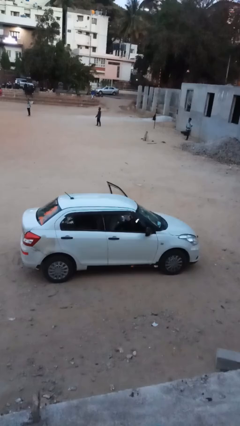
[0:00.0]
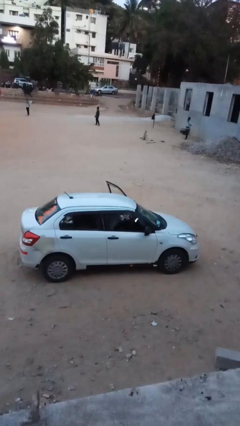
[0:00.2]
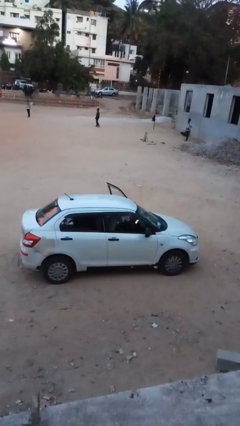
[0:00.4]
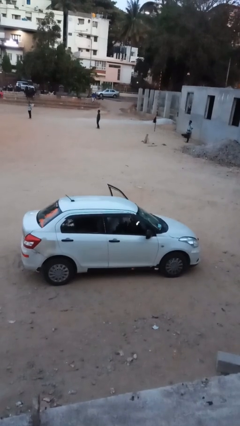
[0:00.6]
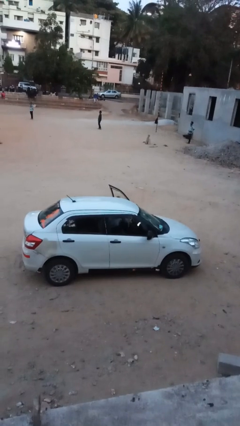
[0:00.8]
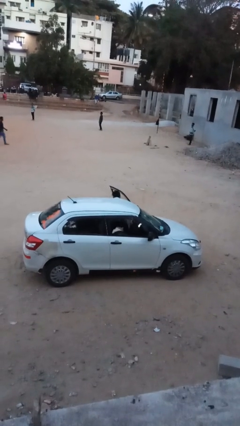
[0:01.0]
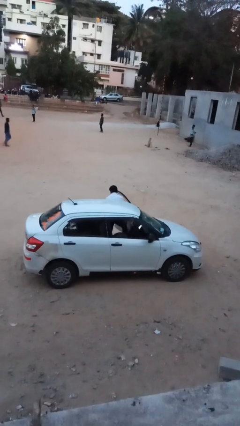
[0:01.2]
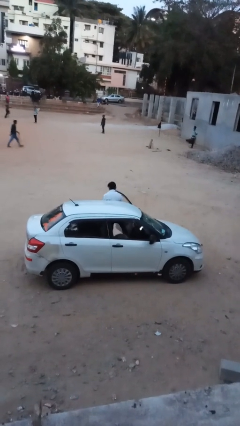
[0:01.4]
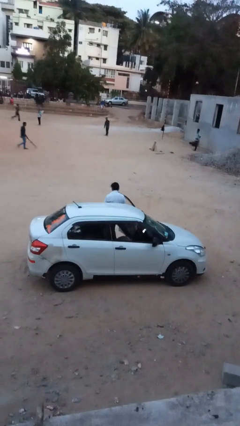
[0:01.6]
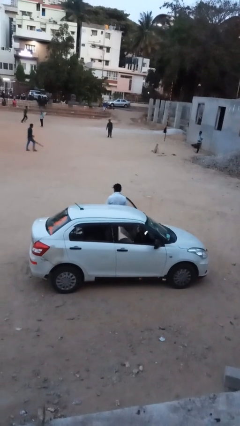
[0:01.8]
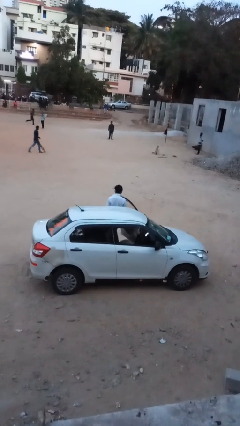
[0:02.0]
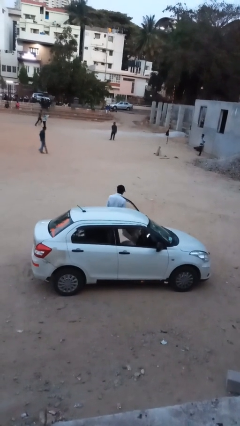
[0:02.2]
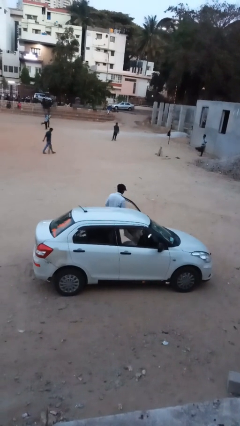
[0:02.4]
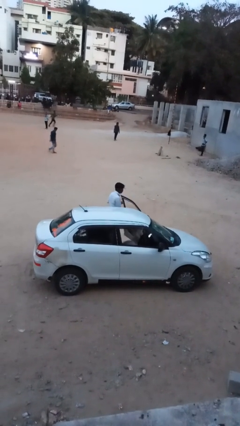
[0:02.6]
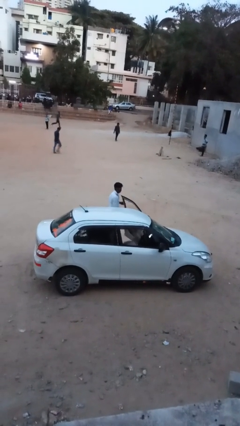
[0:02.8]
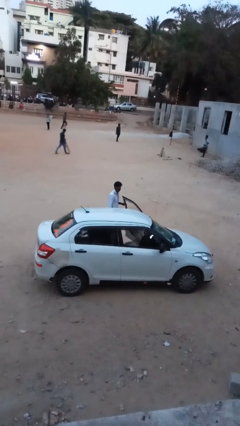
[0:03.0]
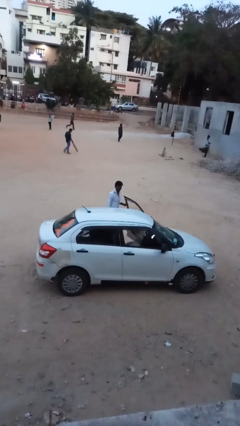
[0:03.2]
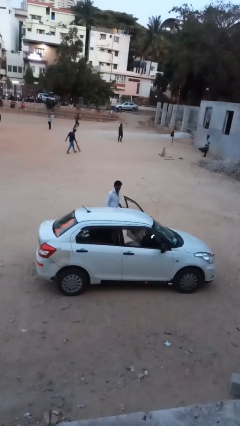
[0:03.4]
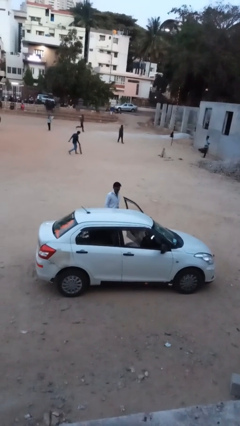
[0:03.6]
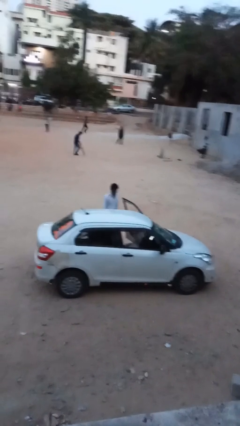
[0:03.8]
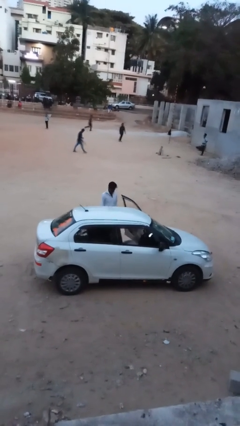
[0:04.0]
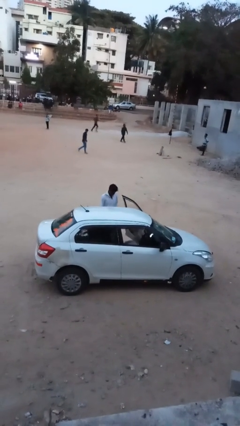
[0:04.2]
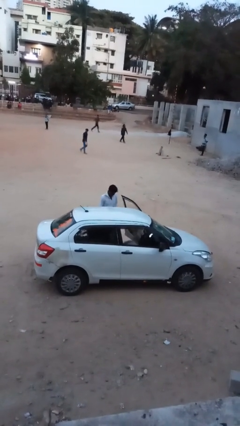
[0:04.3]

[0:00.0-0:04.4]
person exits car

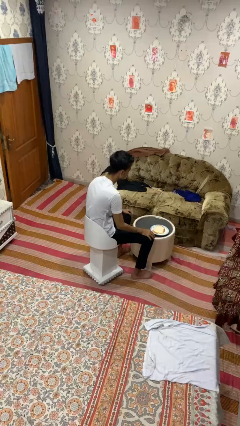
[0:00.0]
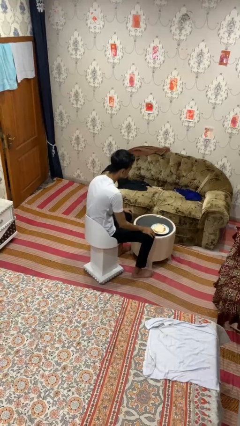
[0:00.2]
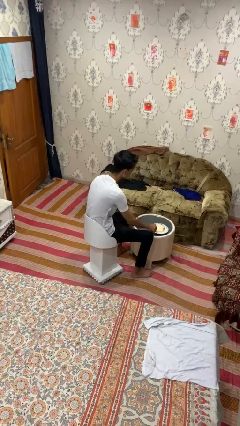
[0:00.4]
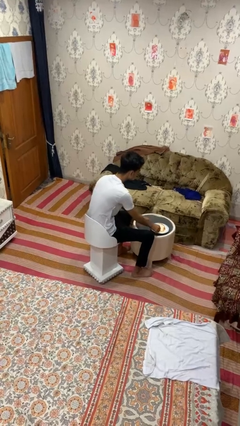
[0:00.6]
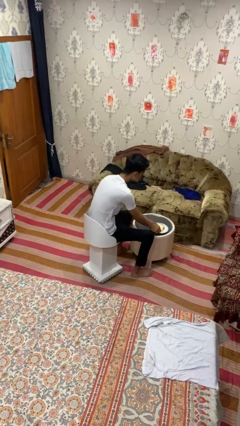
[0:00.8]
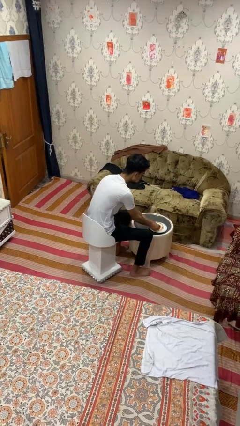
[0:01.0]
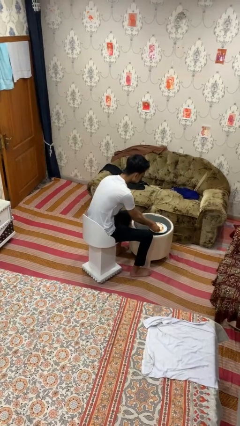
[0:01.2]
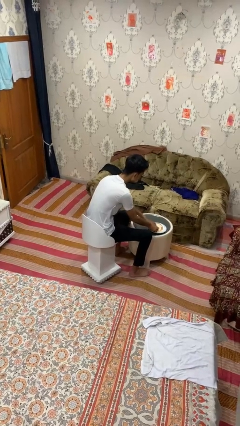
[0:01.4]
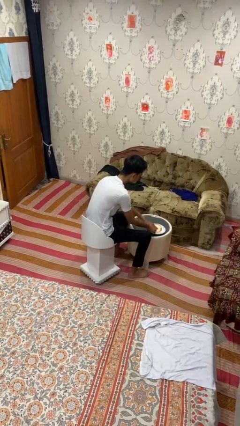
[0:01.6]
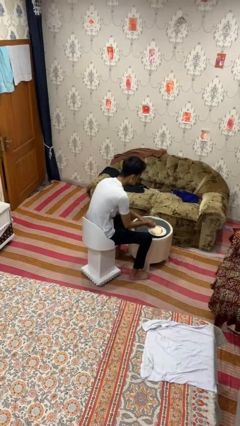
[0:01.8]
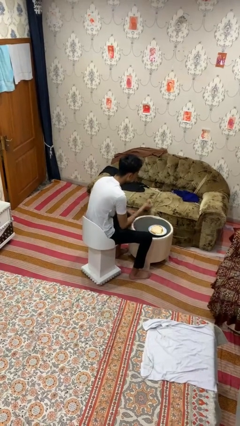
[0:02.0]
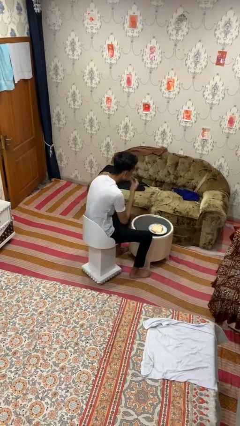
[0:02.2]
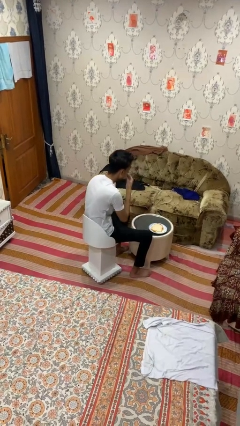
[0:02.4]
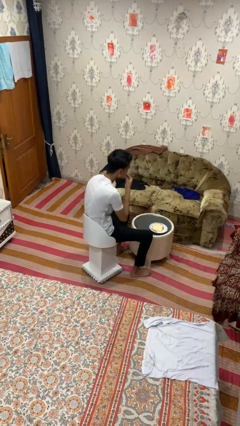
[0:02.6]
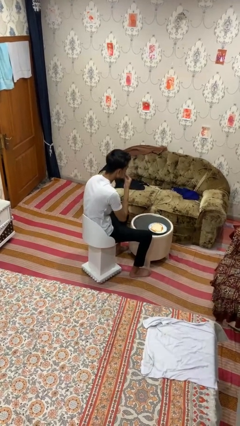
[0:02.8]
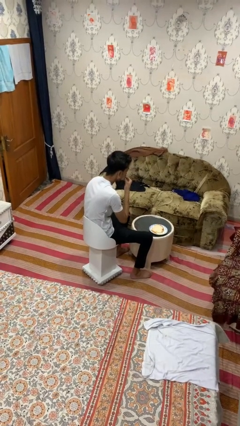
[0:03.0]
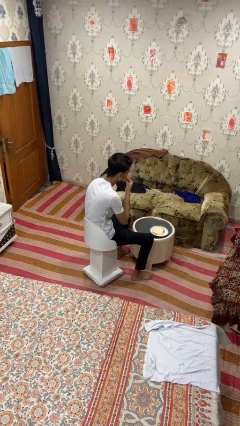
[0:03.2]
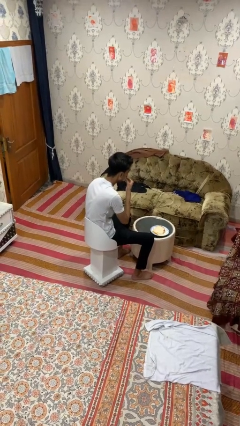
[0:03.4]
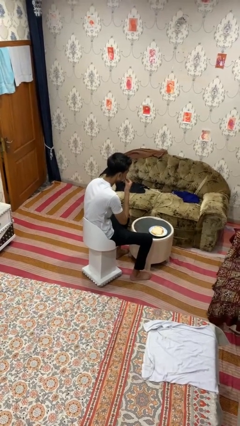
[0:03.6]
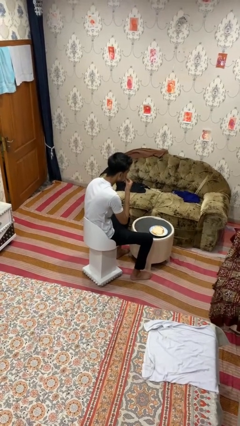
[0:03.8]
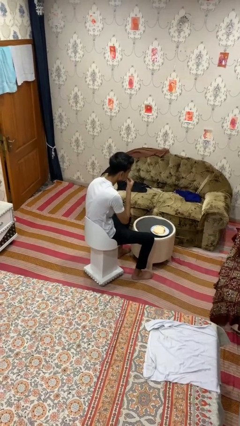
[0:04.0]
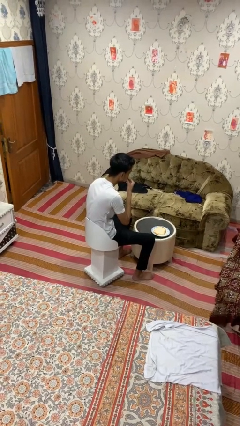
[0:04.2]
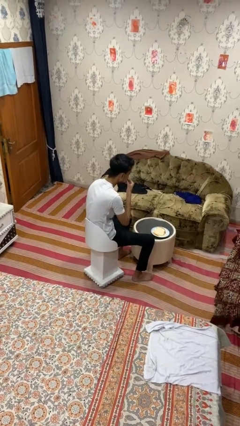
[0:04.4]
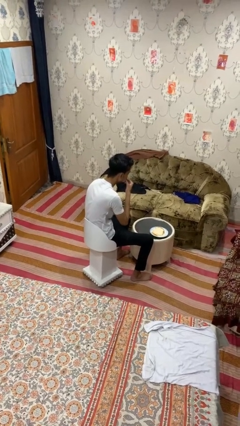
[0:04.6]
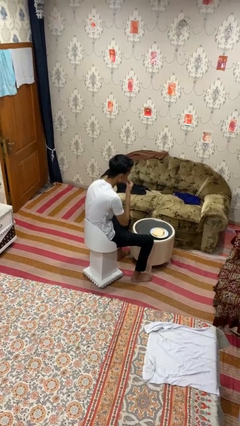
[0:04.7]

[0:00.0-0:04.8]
person eats with hands

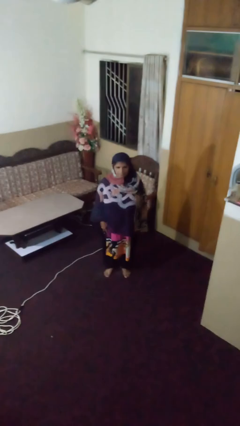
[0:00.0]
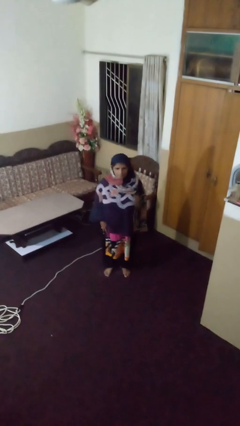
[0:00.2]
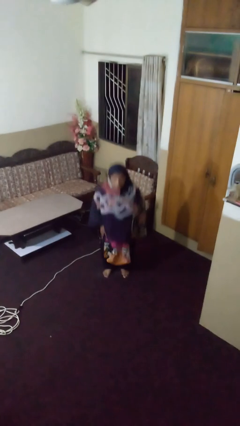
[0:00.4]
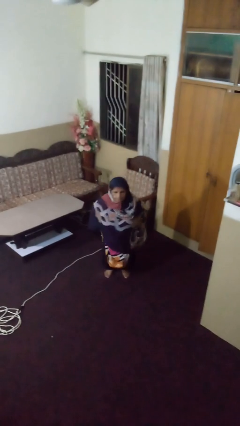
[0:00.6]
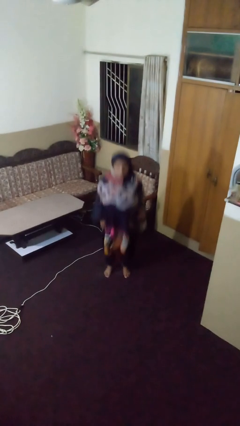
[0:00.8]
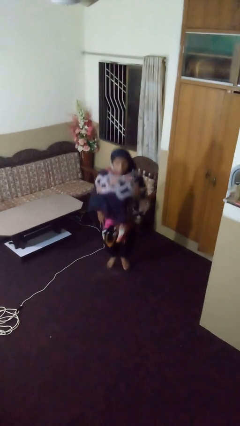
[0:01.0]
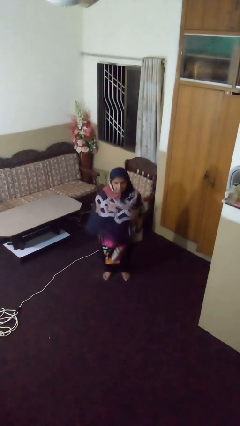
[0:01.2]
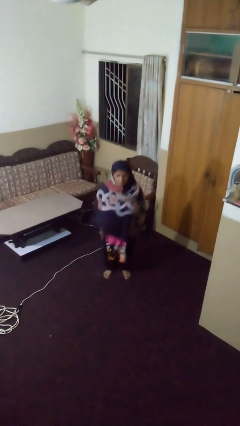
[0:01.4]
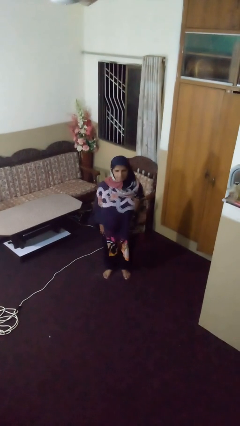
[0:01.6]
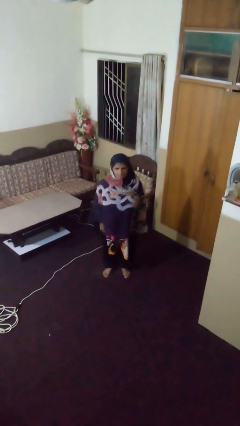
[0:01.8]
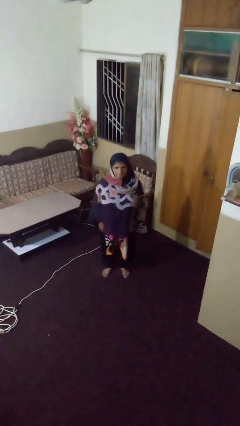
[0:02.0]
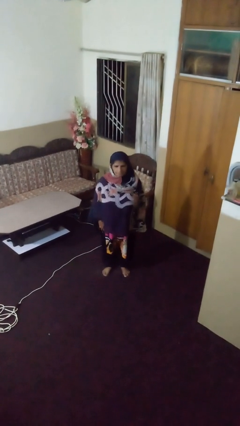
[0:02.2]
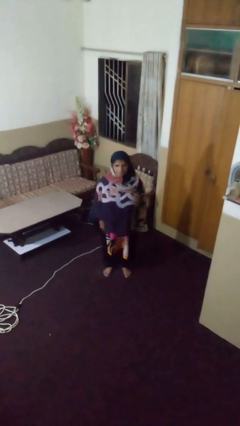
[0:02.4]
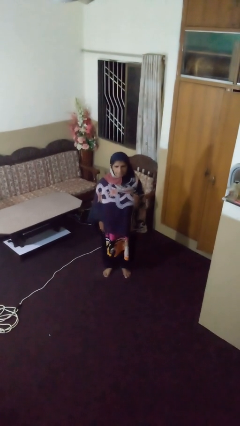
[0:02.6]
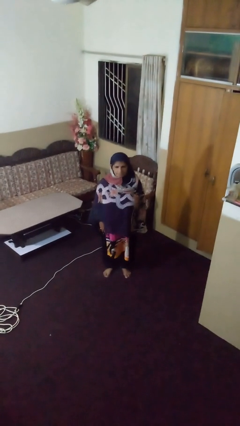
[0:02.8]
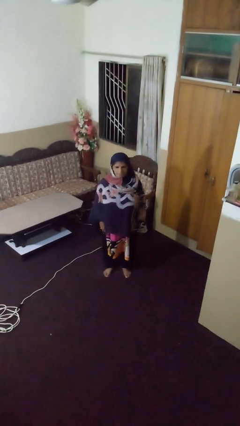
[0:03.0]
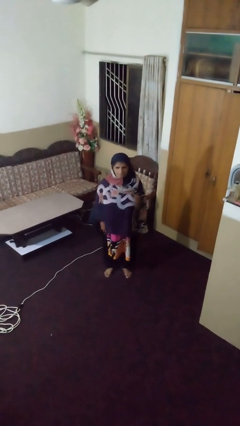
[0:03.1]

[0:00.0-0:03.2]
person jumps

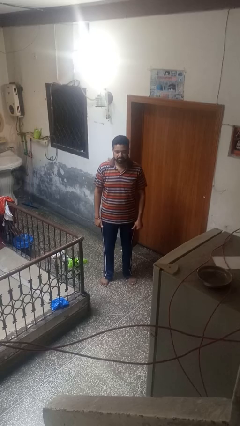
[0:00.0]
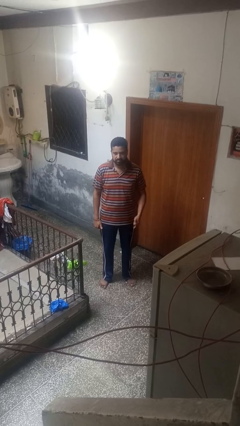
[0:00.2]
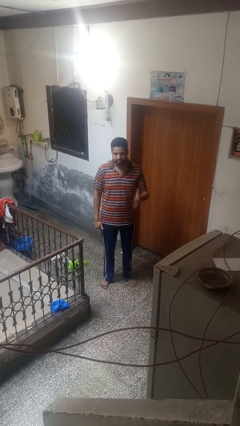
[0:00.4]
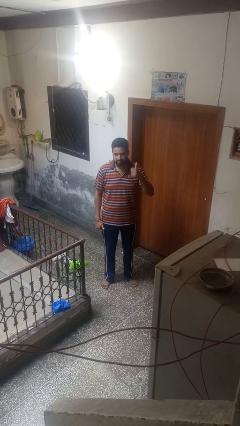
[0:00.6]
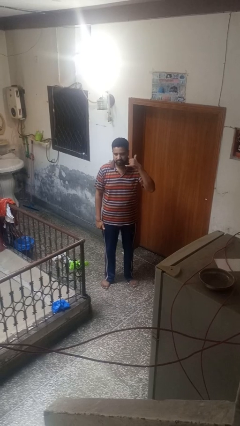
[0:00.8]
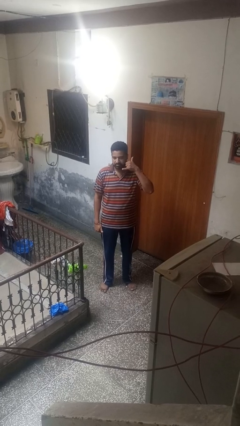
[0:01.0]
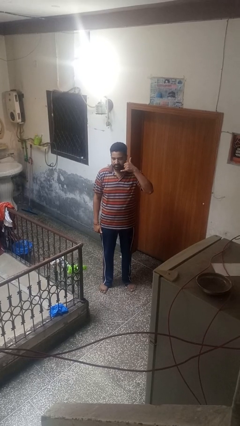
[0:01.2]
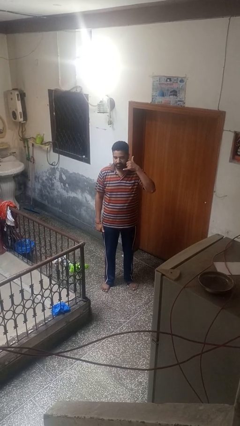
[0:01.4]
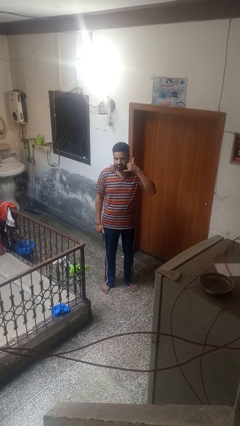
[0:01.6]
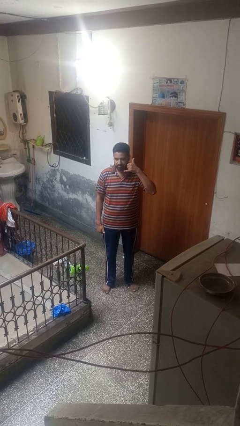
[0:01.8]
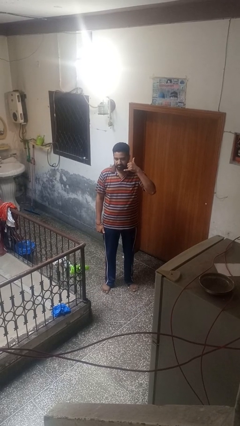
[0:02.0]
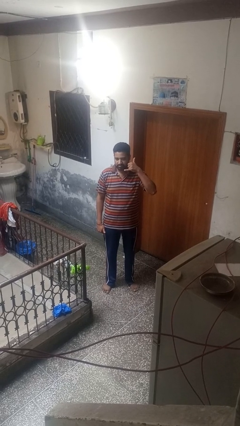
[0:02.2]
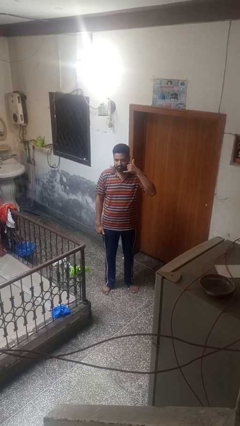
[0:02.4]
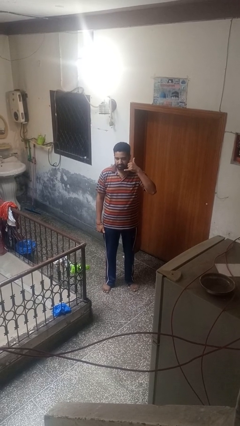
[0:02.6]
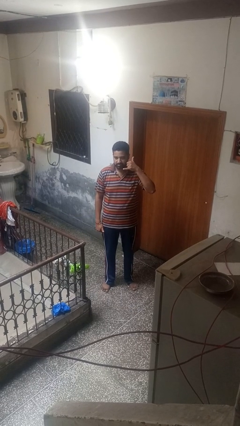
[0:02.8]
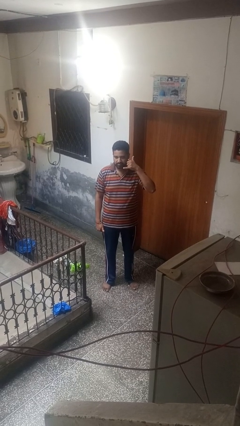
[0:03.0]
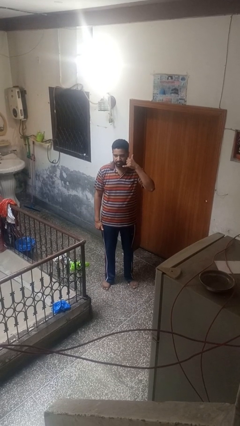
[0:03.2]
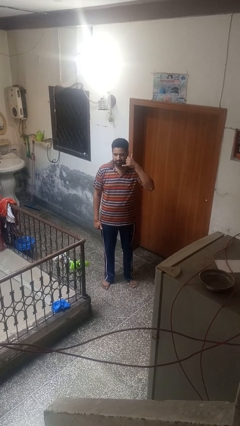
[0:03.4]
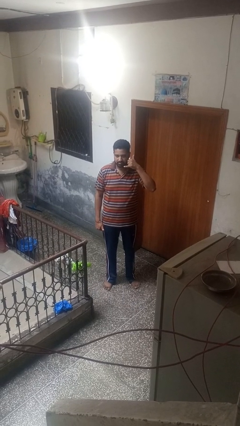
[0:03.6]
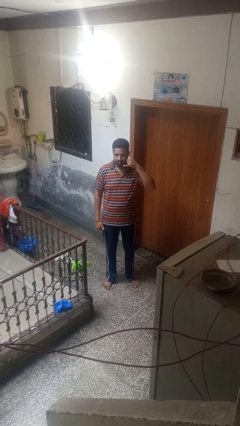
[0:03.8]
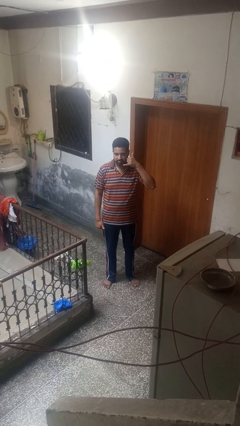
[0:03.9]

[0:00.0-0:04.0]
person gestures call me

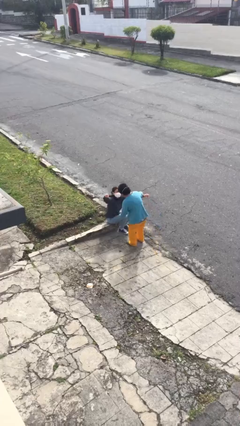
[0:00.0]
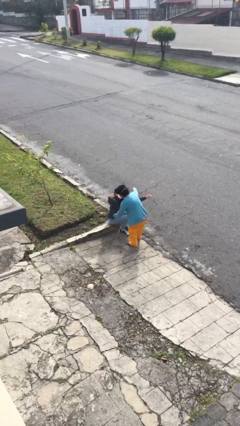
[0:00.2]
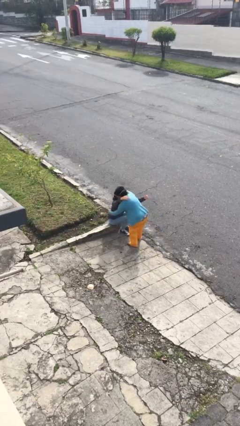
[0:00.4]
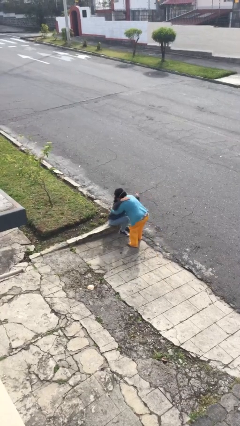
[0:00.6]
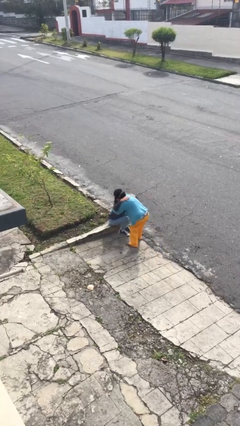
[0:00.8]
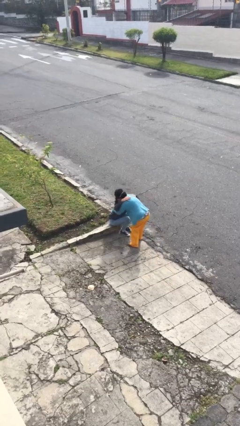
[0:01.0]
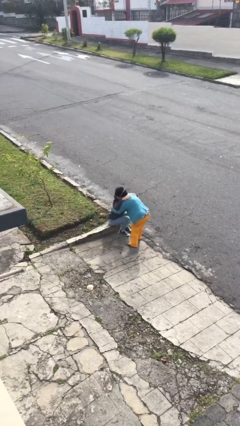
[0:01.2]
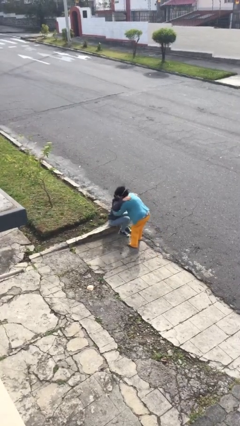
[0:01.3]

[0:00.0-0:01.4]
person embraces person
